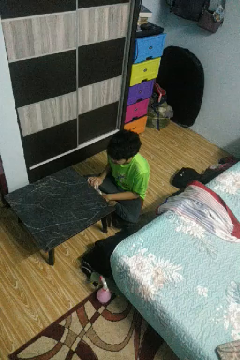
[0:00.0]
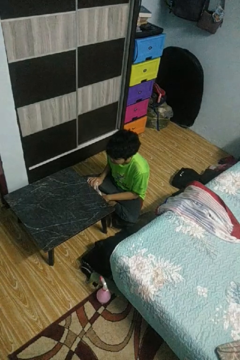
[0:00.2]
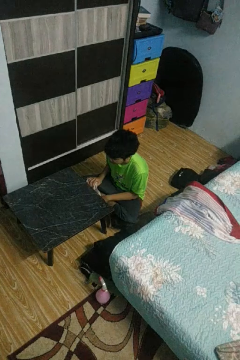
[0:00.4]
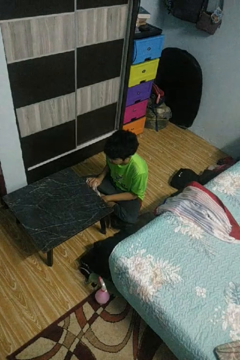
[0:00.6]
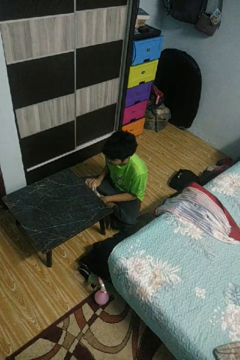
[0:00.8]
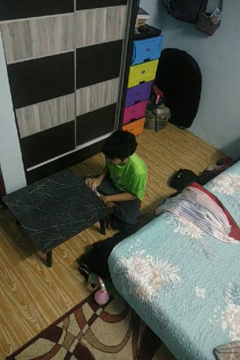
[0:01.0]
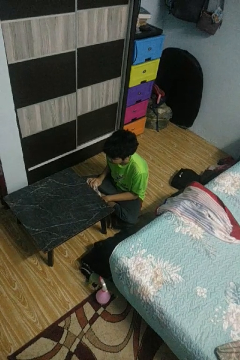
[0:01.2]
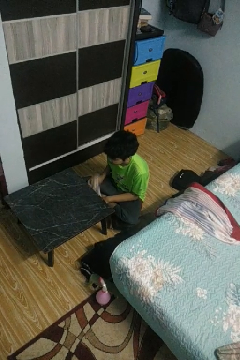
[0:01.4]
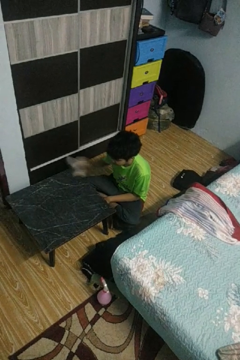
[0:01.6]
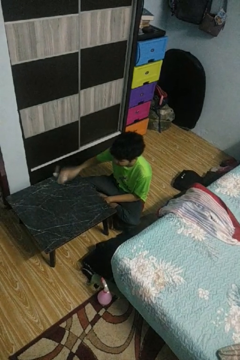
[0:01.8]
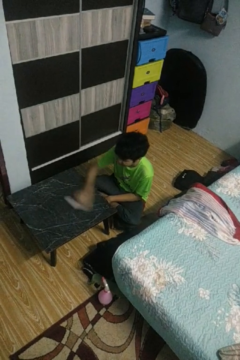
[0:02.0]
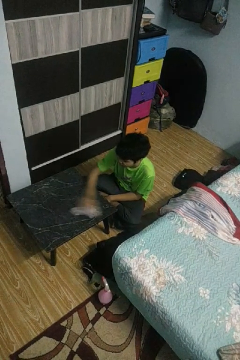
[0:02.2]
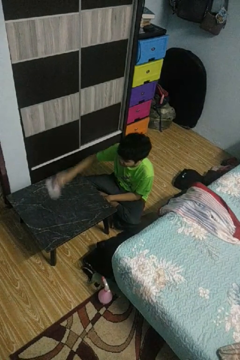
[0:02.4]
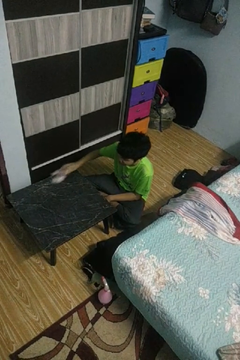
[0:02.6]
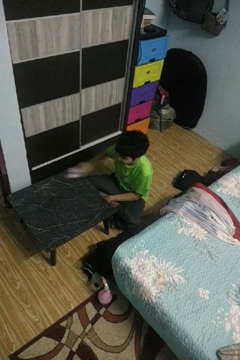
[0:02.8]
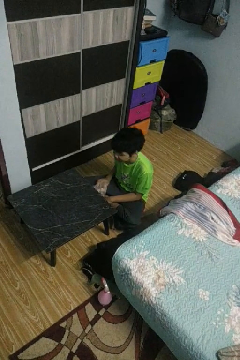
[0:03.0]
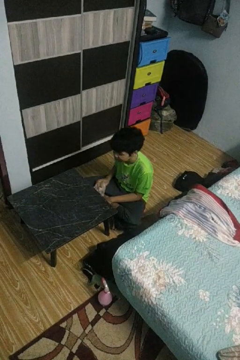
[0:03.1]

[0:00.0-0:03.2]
person cleans table with rag

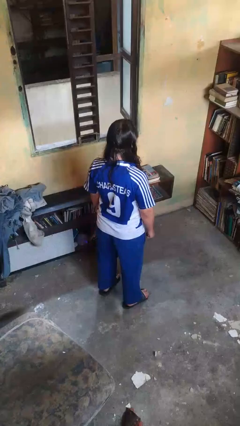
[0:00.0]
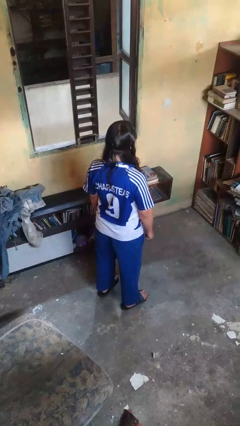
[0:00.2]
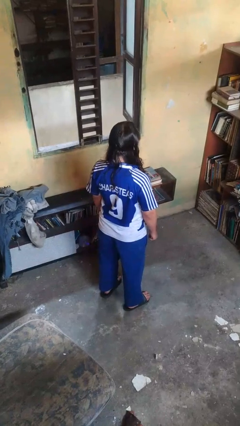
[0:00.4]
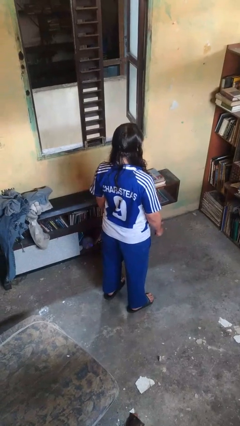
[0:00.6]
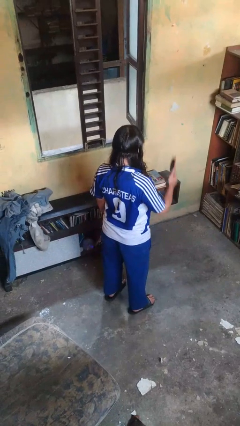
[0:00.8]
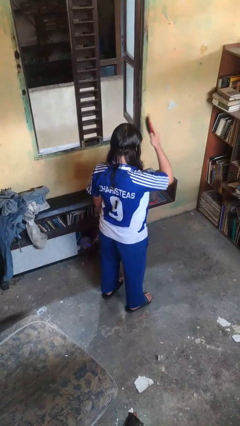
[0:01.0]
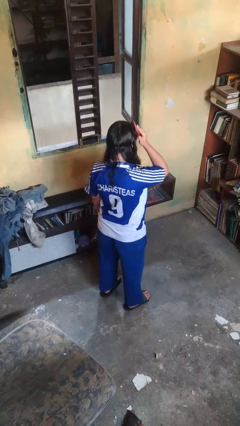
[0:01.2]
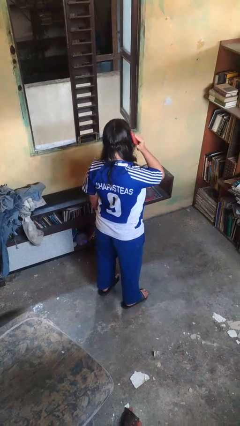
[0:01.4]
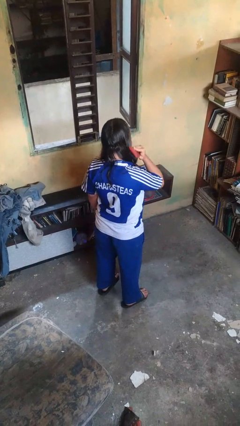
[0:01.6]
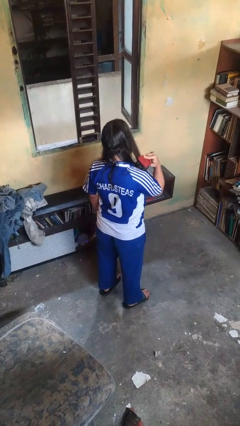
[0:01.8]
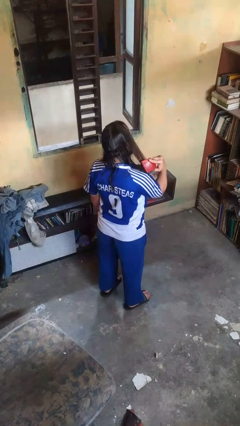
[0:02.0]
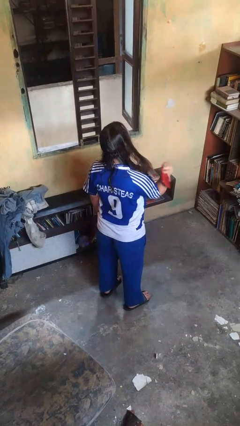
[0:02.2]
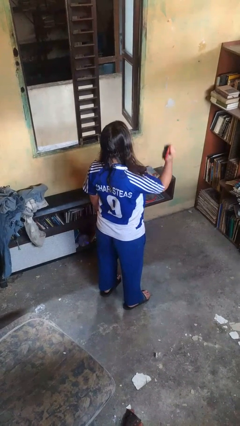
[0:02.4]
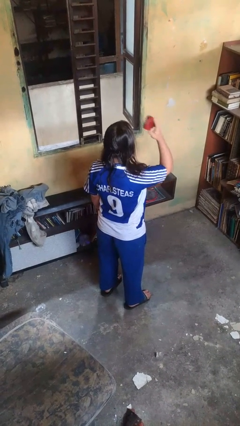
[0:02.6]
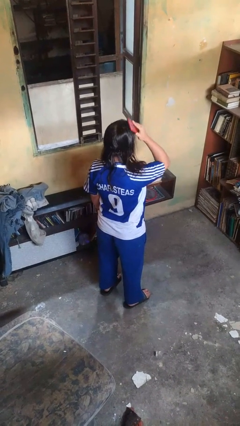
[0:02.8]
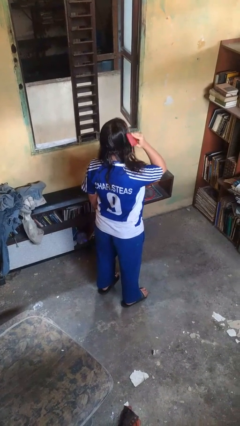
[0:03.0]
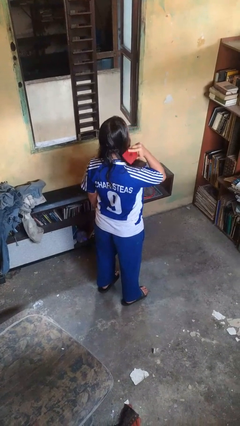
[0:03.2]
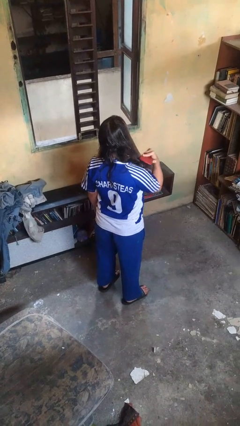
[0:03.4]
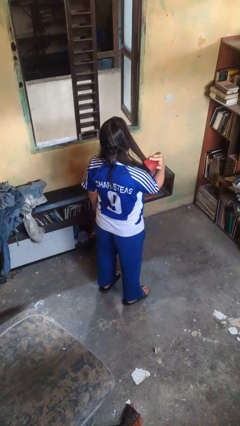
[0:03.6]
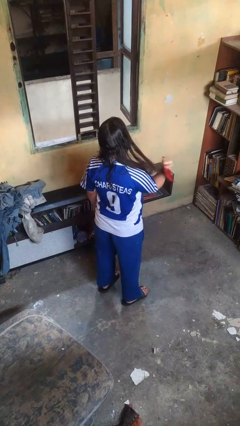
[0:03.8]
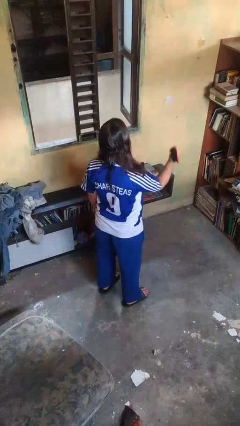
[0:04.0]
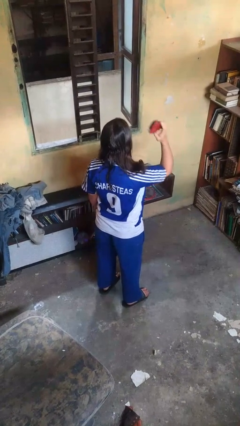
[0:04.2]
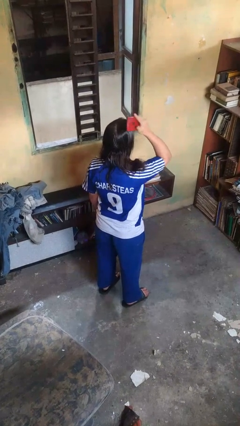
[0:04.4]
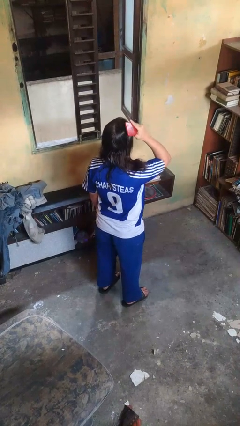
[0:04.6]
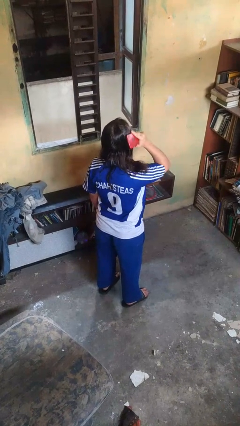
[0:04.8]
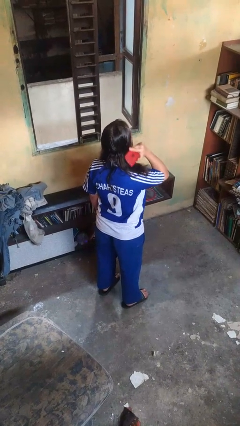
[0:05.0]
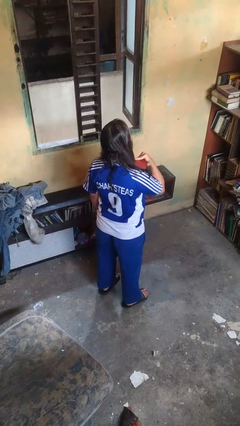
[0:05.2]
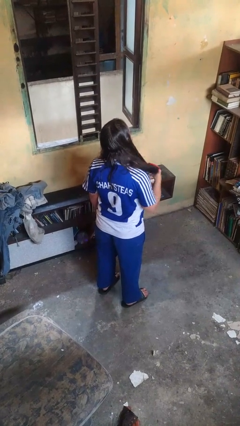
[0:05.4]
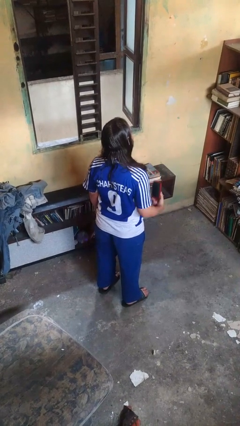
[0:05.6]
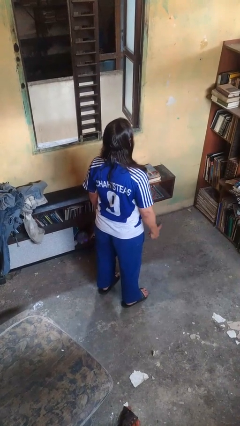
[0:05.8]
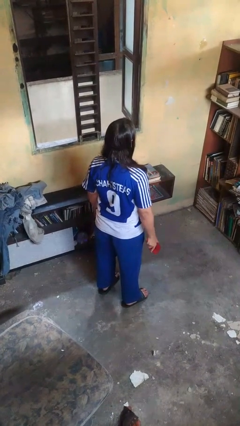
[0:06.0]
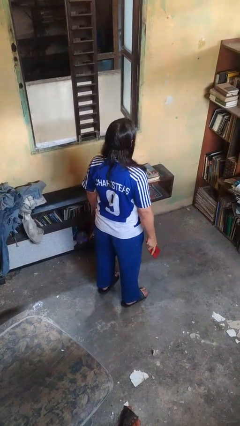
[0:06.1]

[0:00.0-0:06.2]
person brushes hair

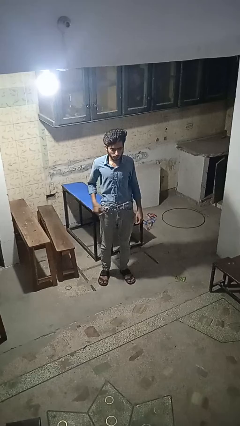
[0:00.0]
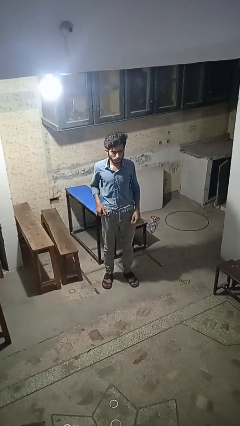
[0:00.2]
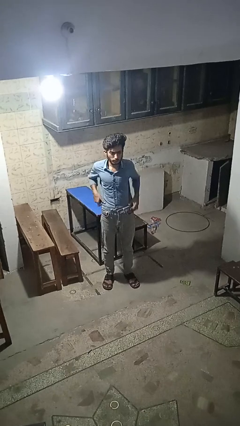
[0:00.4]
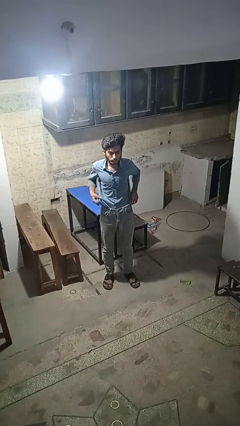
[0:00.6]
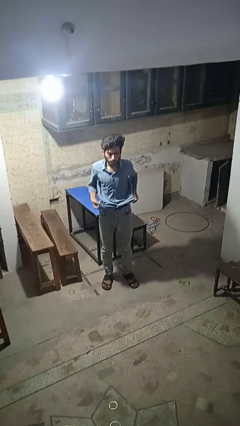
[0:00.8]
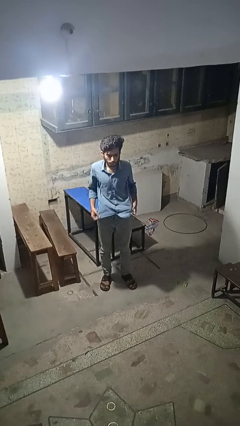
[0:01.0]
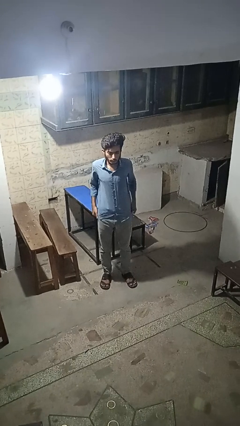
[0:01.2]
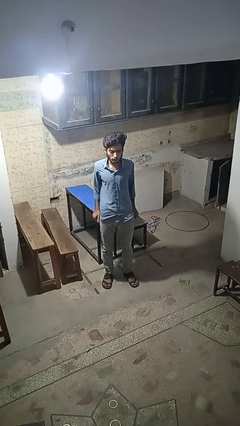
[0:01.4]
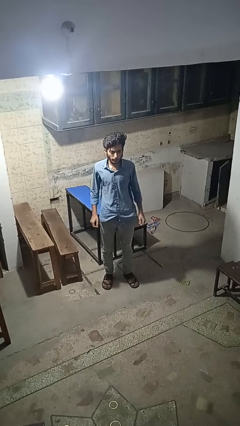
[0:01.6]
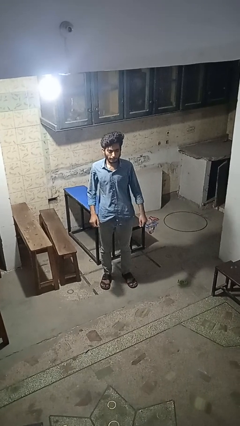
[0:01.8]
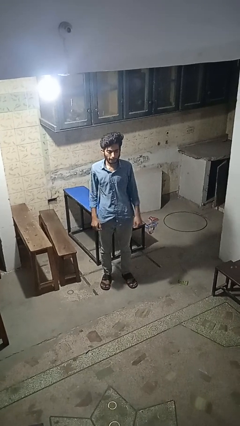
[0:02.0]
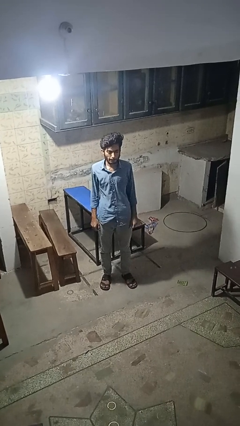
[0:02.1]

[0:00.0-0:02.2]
person untucks shirt

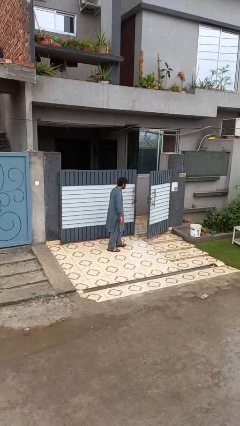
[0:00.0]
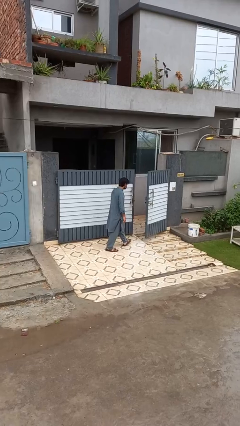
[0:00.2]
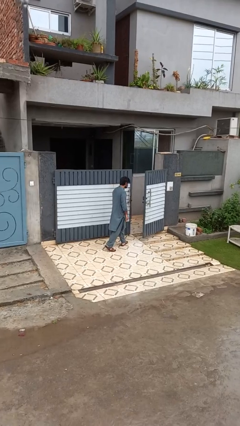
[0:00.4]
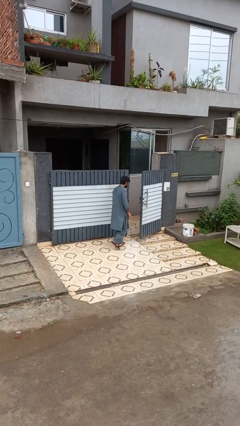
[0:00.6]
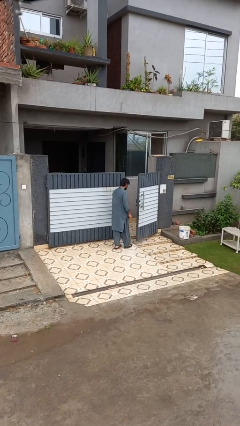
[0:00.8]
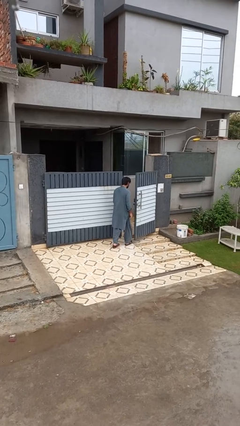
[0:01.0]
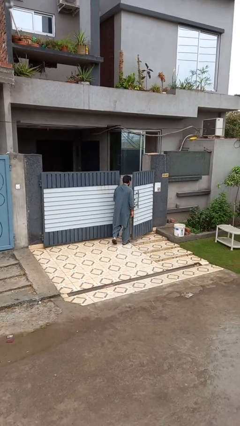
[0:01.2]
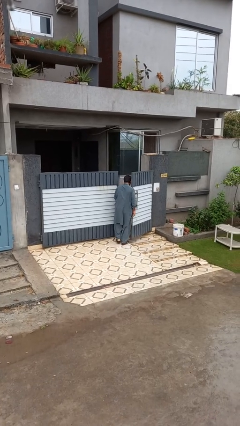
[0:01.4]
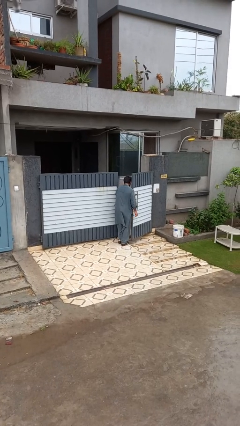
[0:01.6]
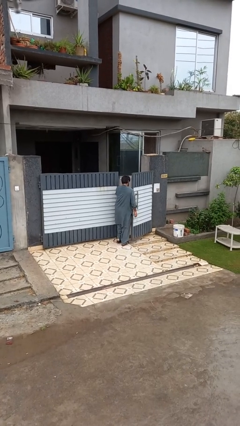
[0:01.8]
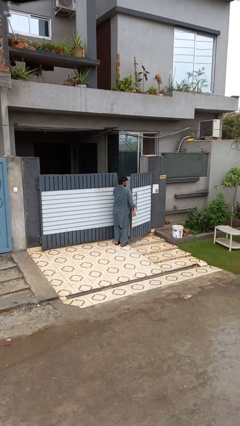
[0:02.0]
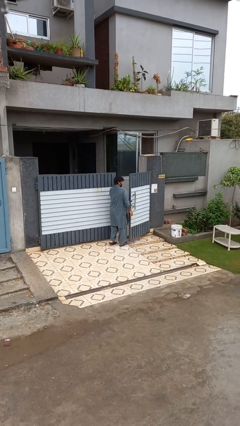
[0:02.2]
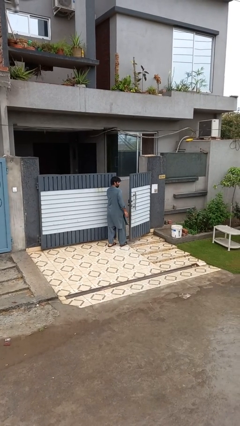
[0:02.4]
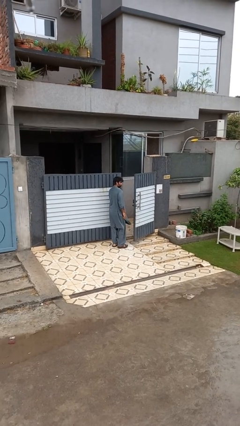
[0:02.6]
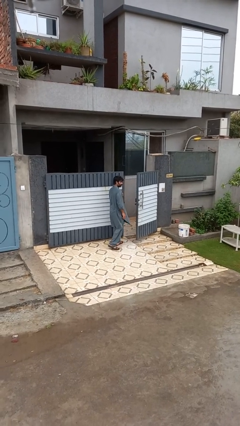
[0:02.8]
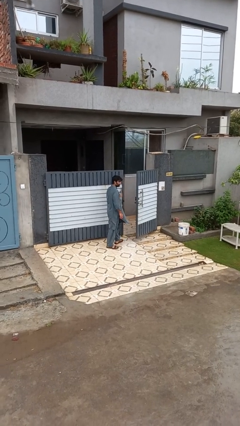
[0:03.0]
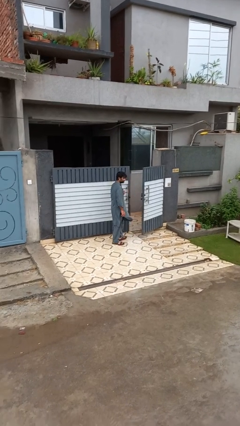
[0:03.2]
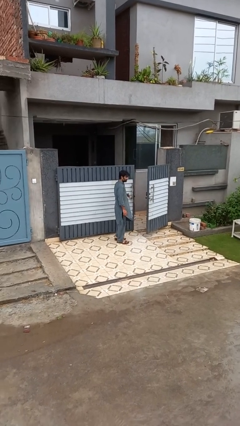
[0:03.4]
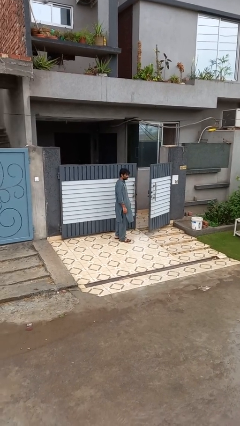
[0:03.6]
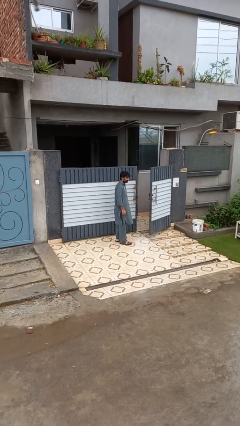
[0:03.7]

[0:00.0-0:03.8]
person bumps into wall

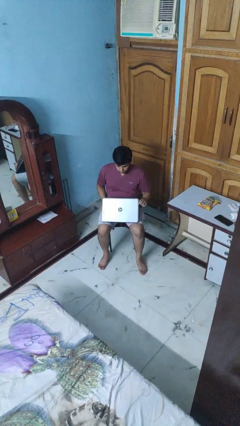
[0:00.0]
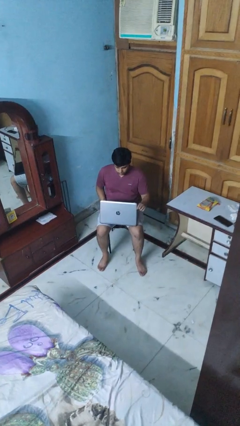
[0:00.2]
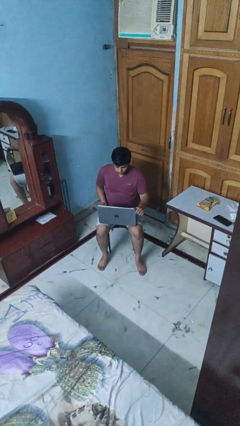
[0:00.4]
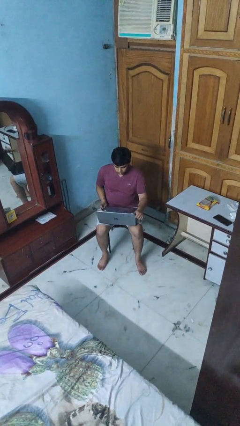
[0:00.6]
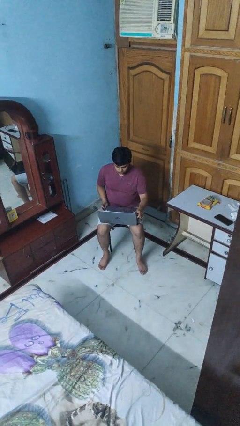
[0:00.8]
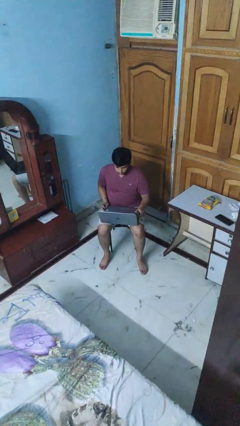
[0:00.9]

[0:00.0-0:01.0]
person opens laptop

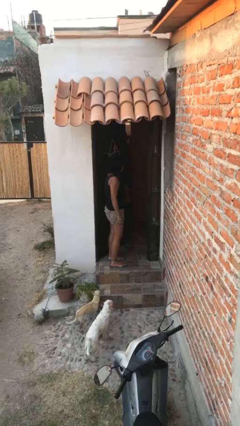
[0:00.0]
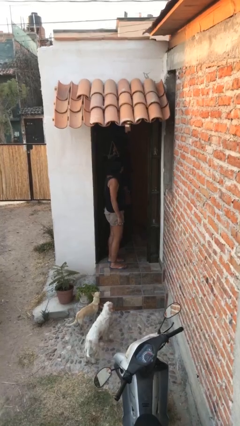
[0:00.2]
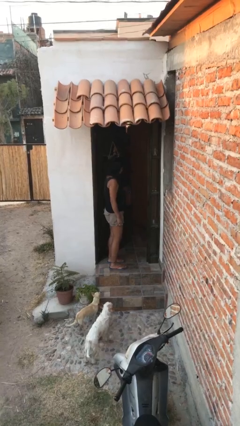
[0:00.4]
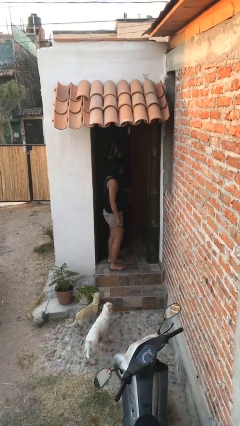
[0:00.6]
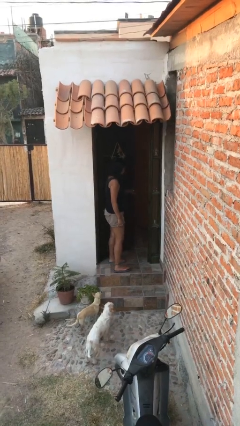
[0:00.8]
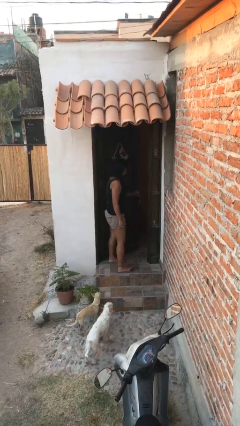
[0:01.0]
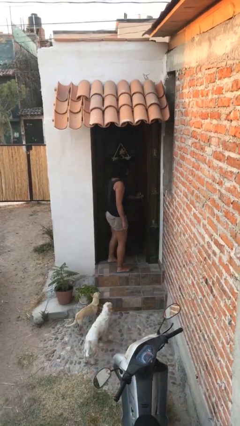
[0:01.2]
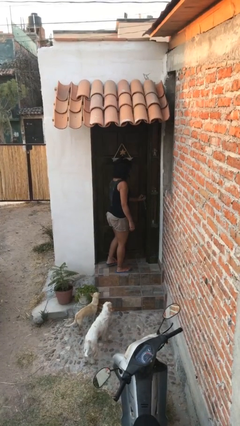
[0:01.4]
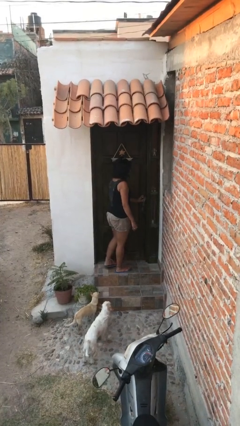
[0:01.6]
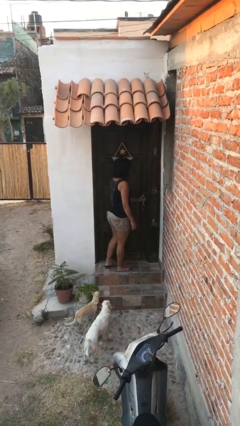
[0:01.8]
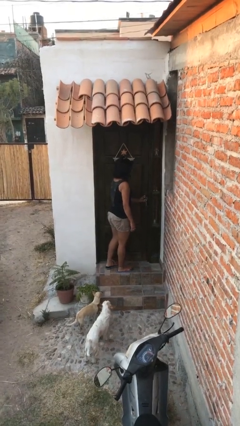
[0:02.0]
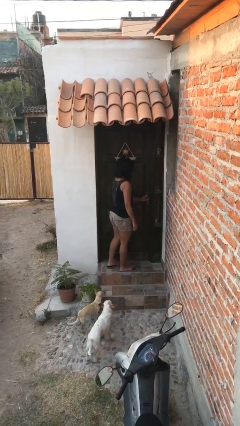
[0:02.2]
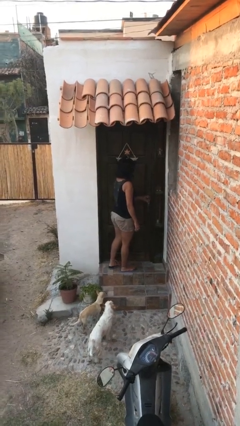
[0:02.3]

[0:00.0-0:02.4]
person closes facility door
